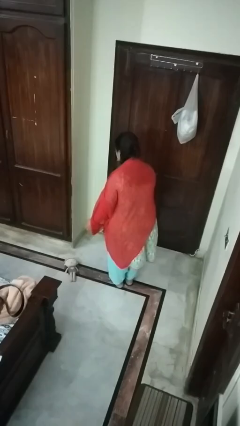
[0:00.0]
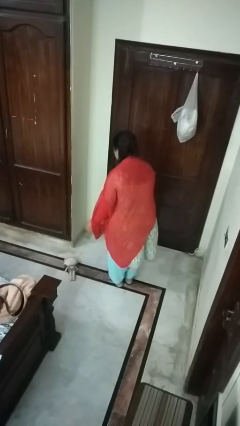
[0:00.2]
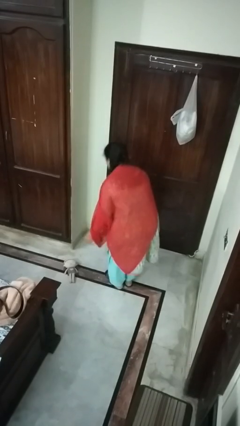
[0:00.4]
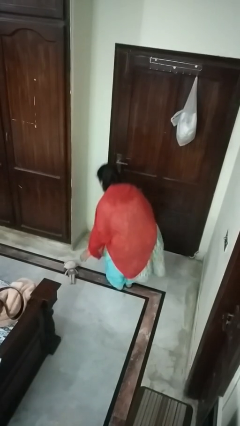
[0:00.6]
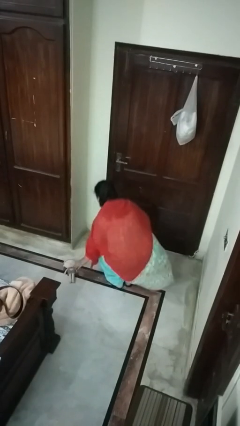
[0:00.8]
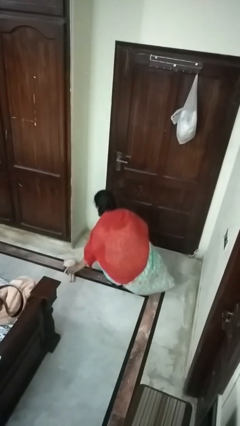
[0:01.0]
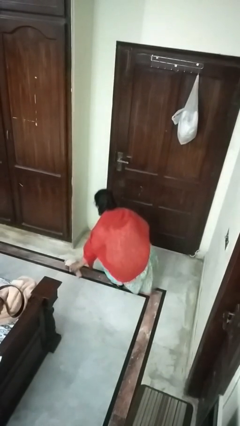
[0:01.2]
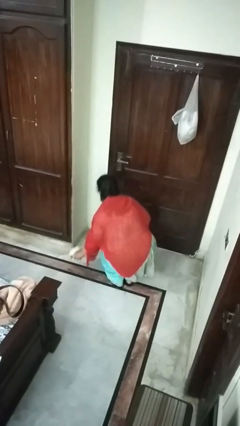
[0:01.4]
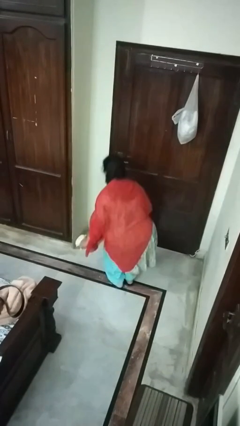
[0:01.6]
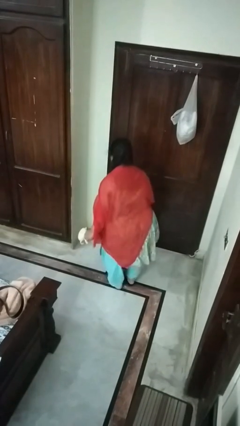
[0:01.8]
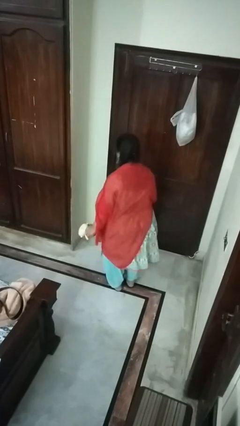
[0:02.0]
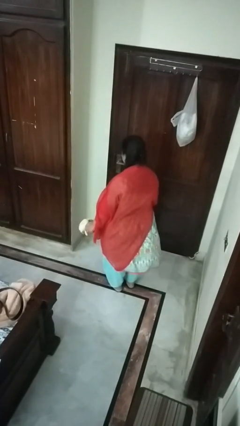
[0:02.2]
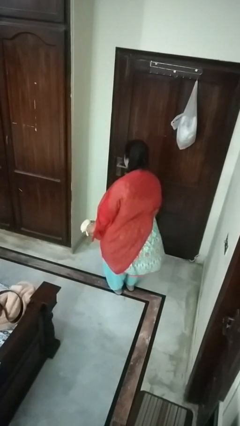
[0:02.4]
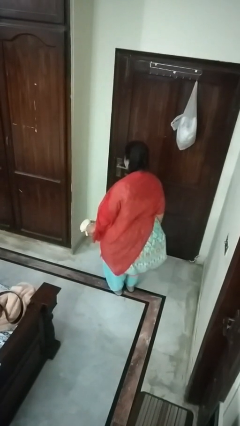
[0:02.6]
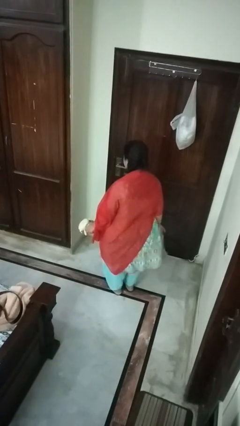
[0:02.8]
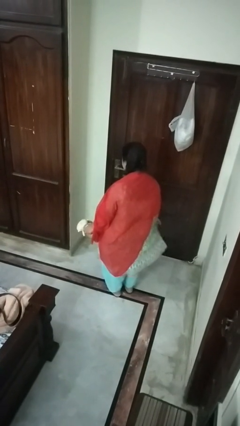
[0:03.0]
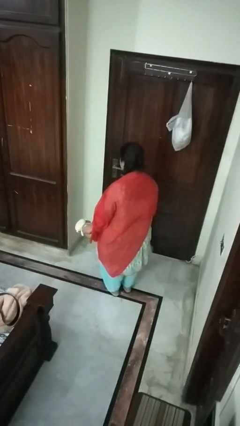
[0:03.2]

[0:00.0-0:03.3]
person picks up object from floor

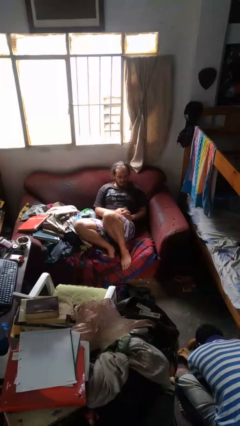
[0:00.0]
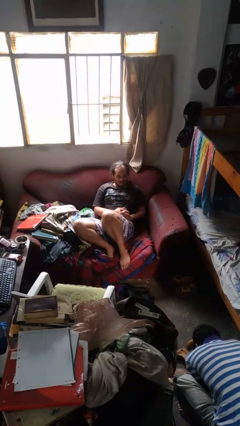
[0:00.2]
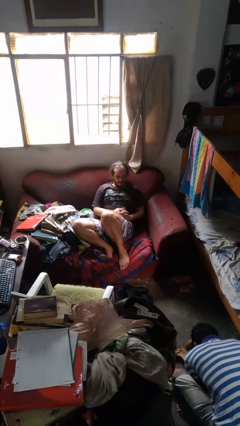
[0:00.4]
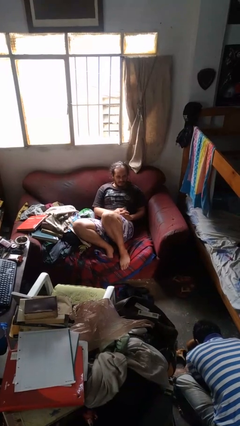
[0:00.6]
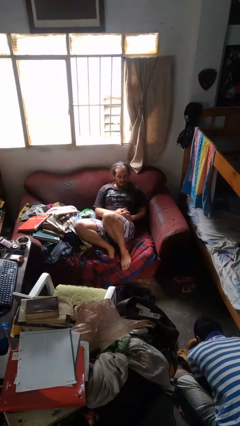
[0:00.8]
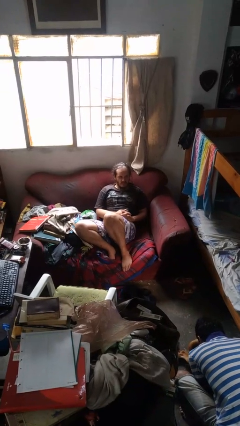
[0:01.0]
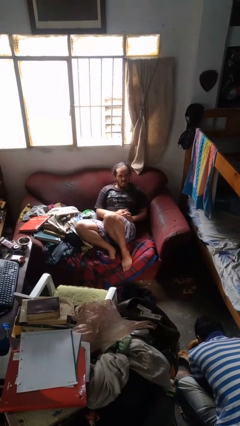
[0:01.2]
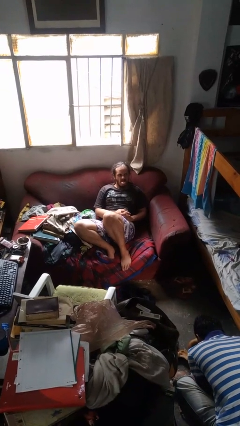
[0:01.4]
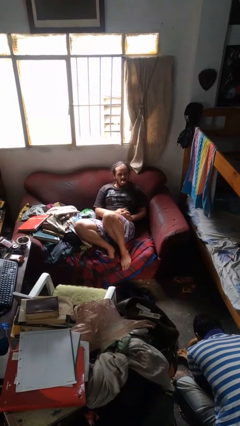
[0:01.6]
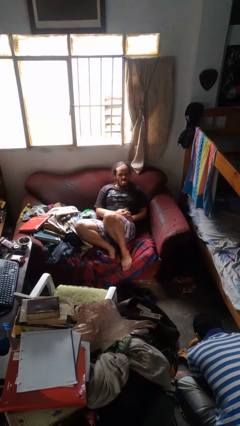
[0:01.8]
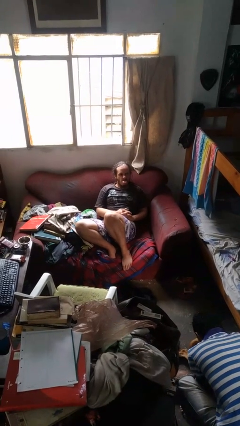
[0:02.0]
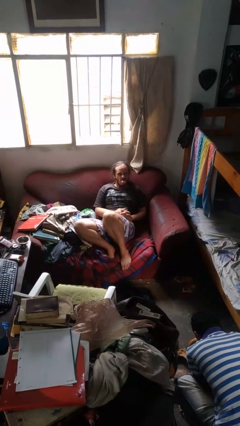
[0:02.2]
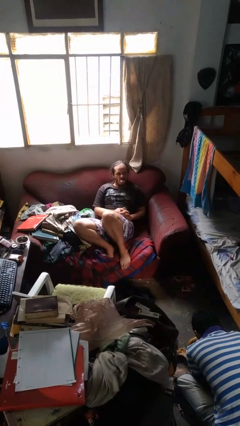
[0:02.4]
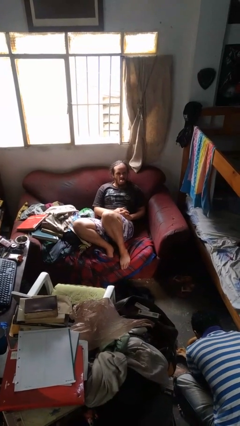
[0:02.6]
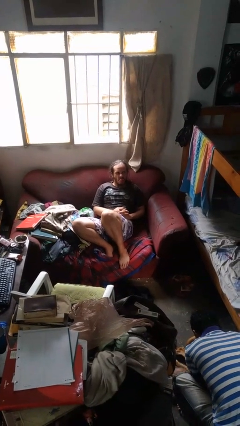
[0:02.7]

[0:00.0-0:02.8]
person sticks out tongue

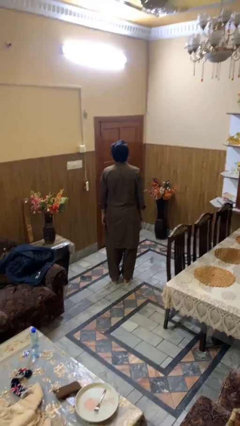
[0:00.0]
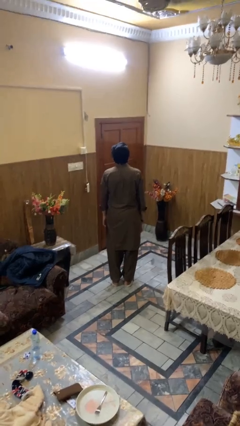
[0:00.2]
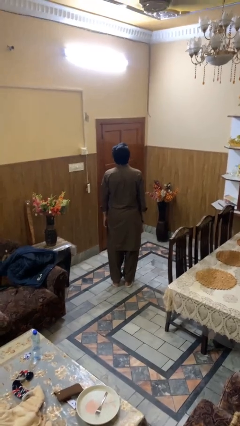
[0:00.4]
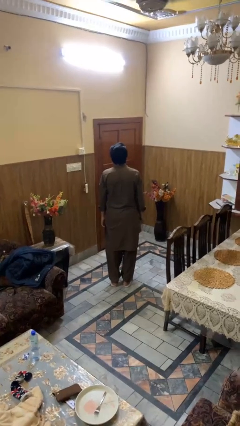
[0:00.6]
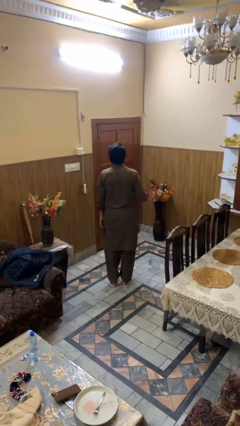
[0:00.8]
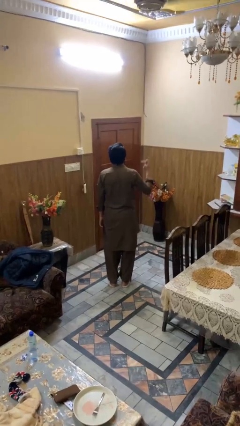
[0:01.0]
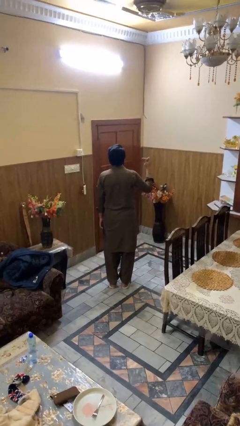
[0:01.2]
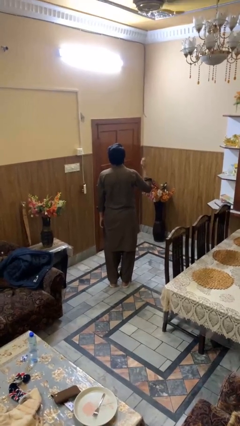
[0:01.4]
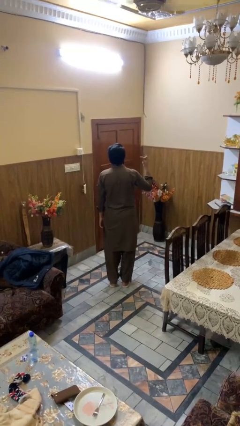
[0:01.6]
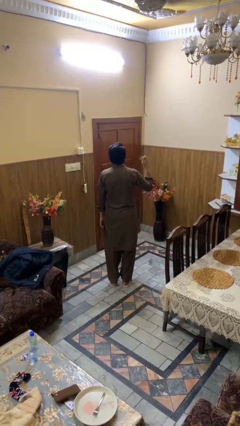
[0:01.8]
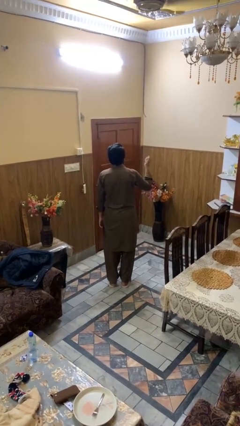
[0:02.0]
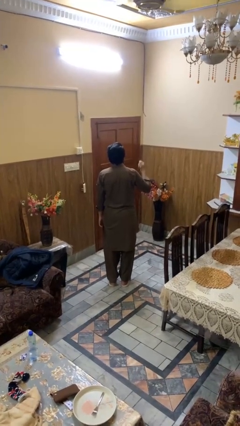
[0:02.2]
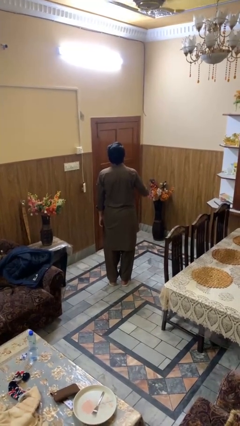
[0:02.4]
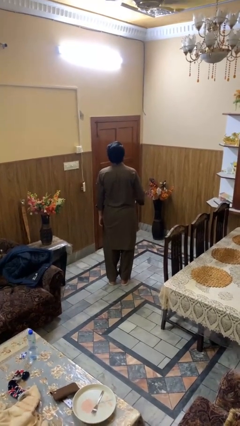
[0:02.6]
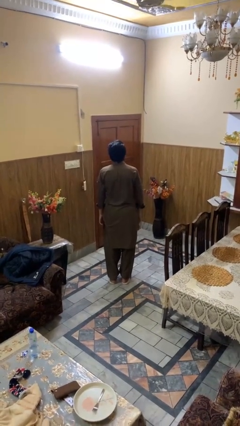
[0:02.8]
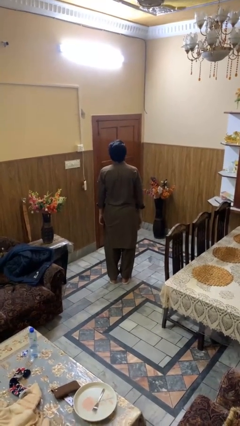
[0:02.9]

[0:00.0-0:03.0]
person snaps fingers

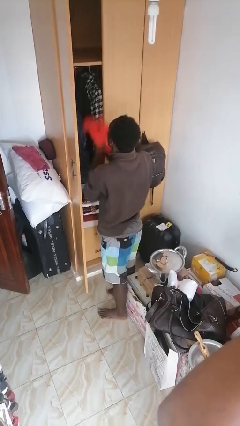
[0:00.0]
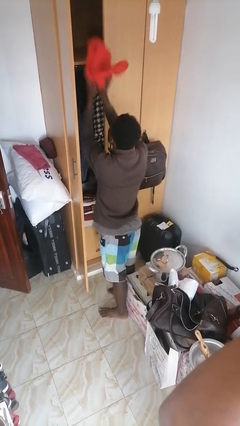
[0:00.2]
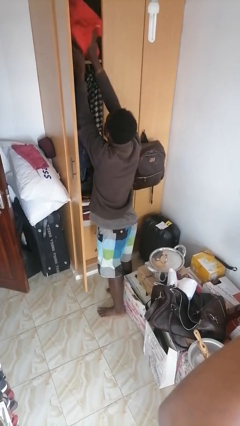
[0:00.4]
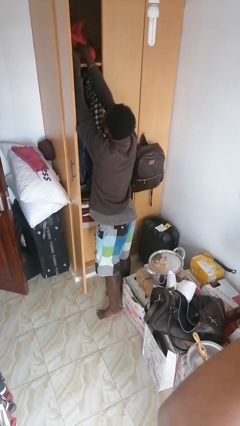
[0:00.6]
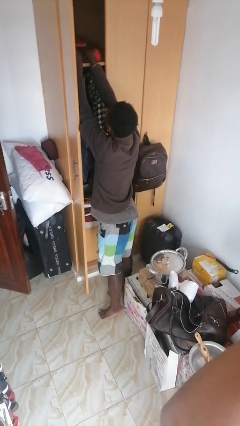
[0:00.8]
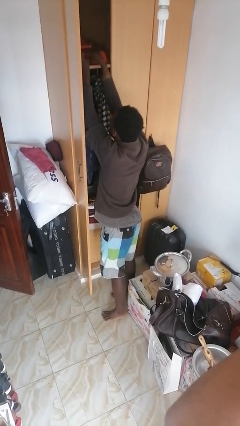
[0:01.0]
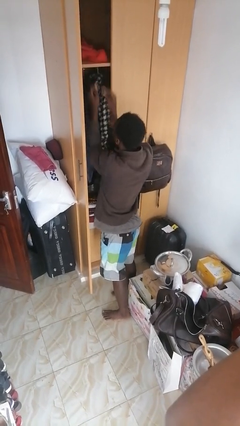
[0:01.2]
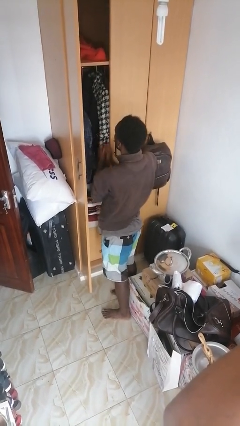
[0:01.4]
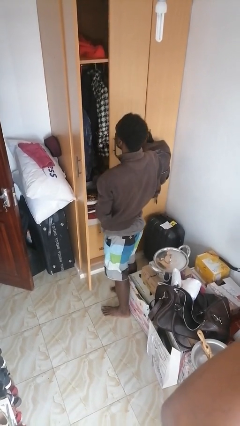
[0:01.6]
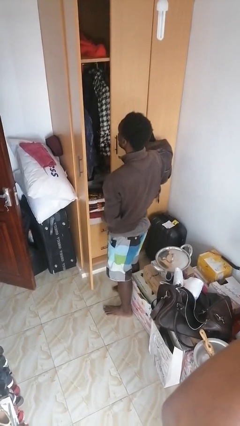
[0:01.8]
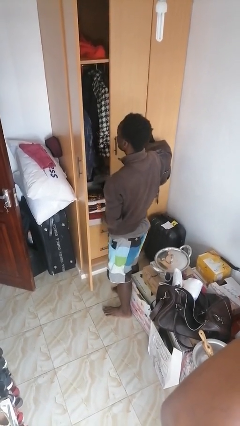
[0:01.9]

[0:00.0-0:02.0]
person puts down object on shelf

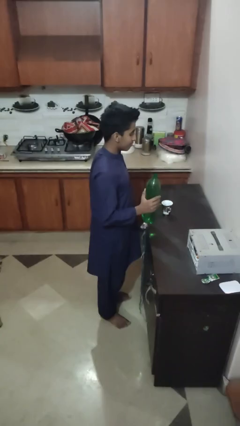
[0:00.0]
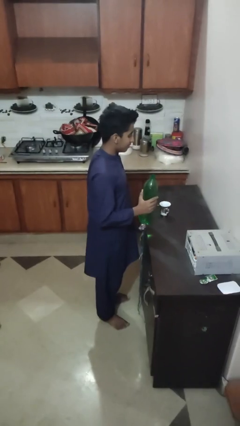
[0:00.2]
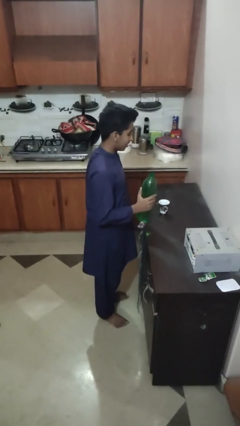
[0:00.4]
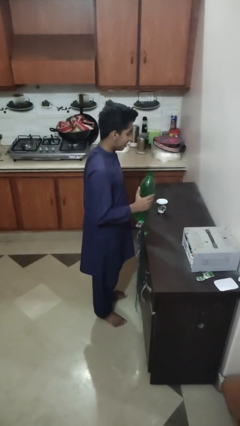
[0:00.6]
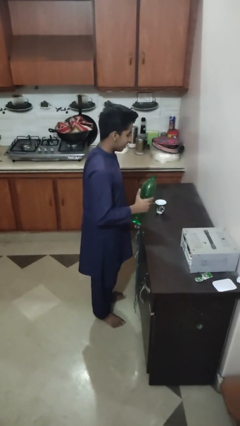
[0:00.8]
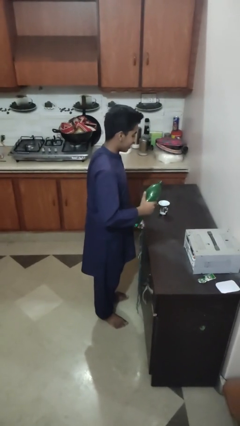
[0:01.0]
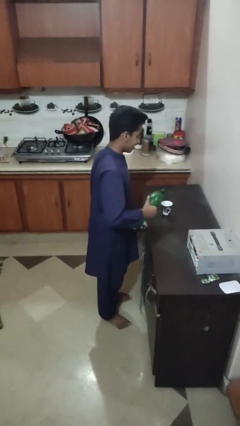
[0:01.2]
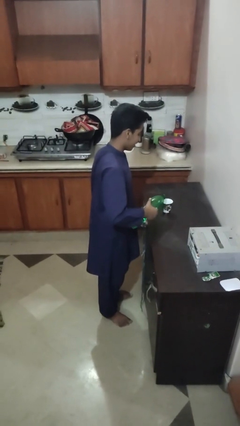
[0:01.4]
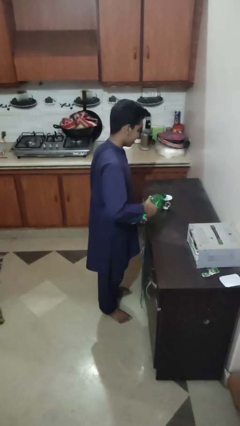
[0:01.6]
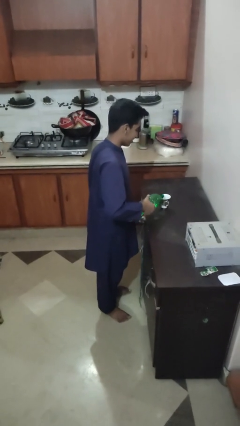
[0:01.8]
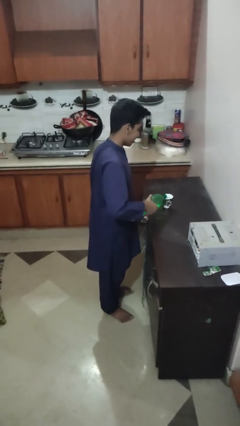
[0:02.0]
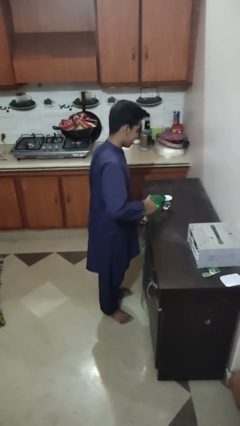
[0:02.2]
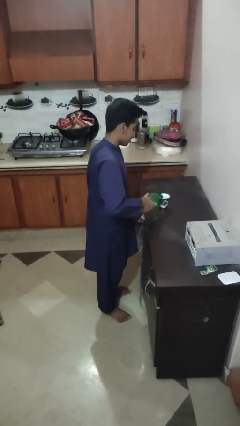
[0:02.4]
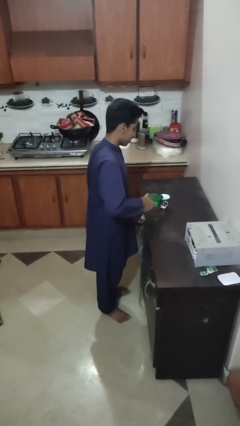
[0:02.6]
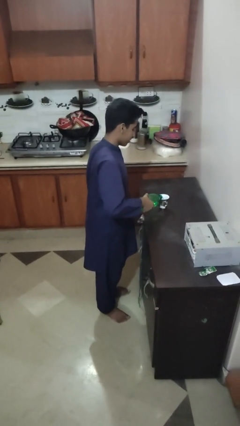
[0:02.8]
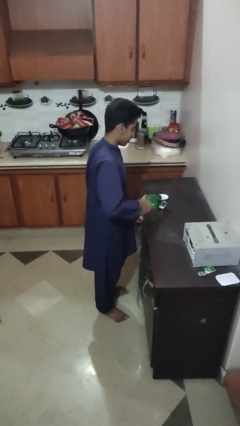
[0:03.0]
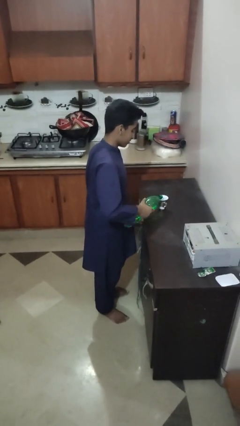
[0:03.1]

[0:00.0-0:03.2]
person pours liquid into cup

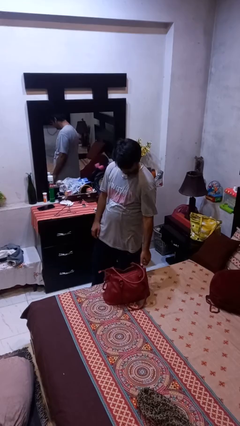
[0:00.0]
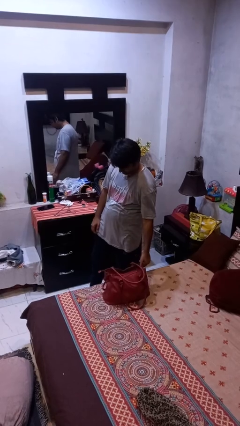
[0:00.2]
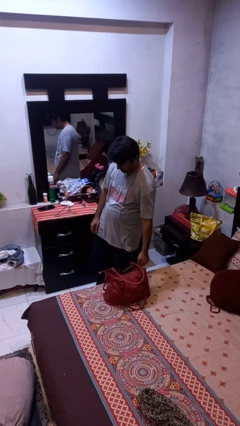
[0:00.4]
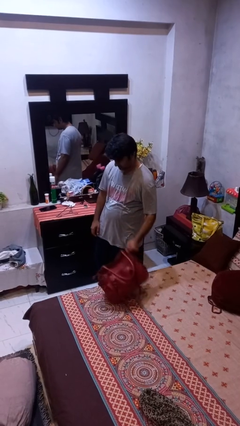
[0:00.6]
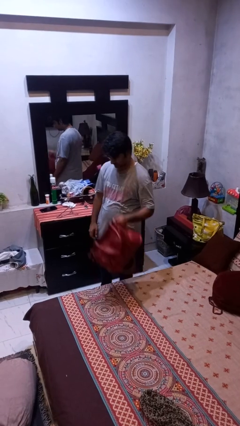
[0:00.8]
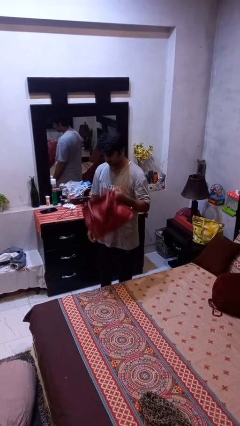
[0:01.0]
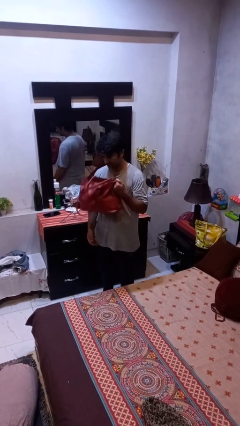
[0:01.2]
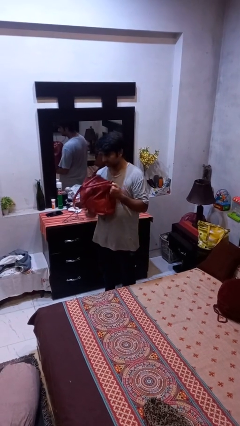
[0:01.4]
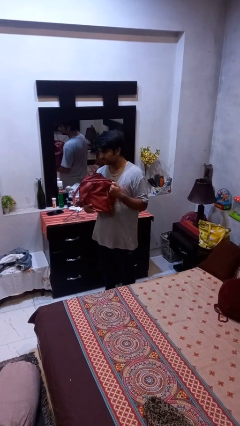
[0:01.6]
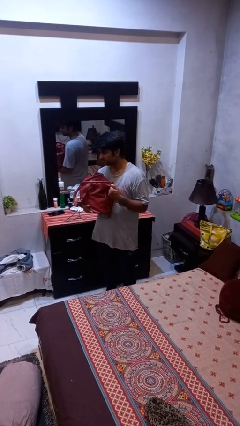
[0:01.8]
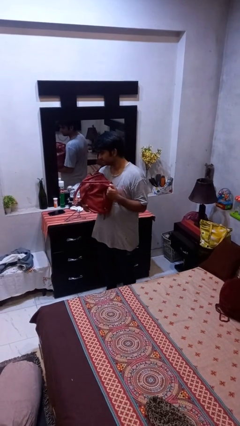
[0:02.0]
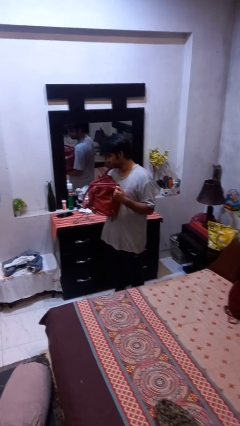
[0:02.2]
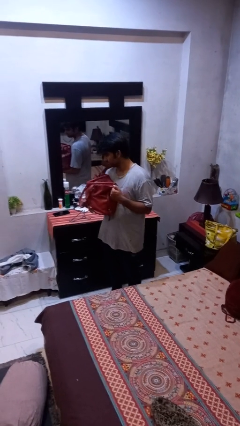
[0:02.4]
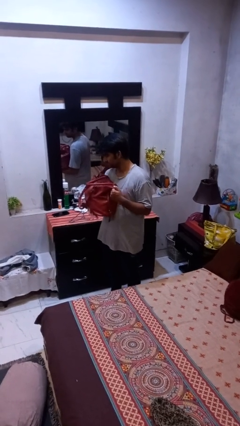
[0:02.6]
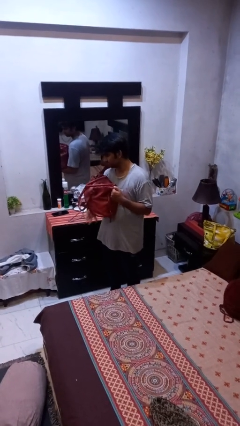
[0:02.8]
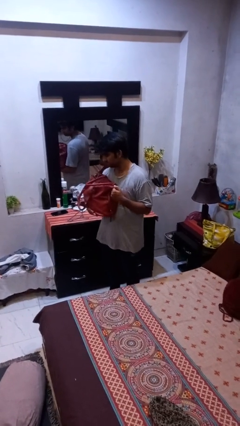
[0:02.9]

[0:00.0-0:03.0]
person picks up object from bed
